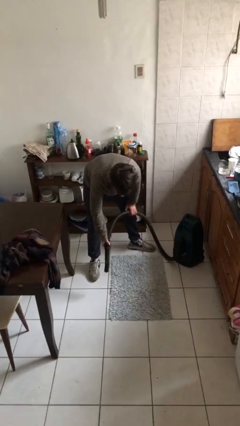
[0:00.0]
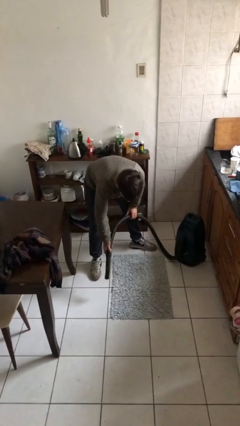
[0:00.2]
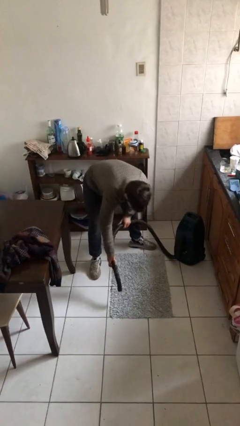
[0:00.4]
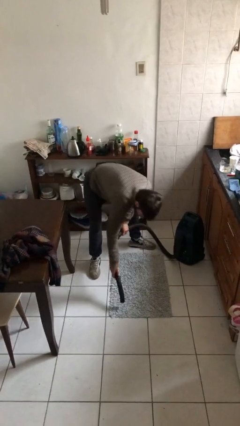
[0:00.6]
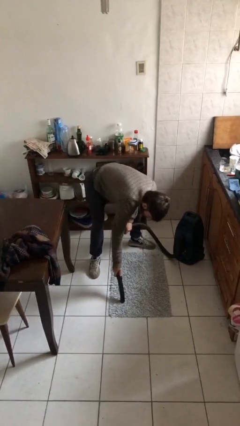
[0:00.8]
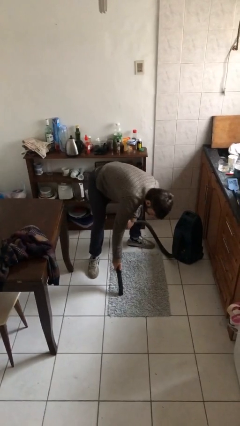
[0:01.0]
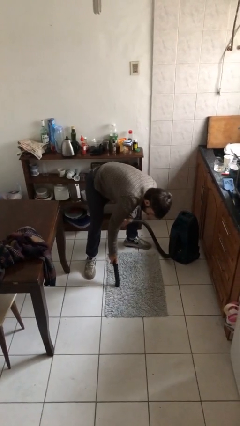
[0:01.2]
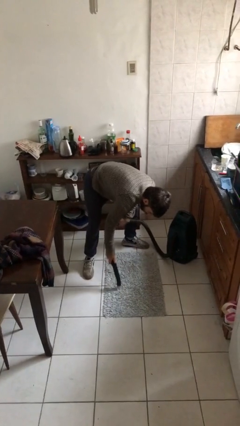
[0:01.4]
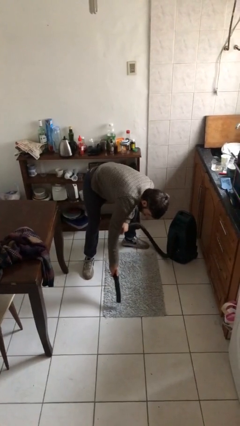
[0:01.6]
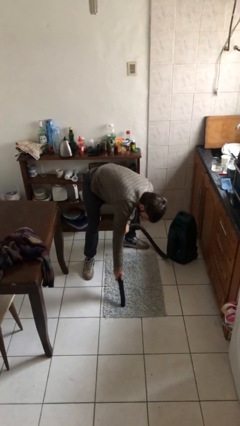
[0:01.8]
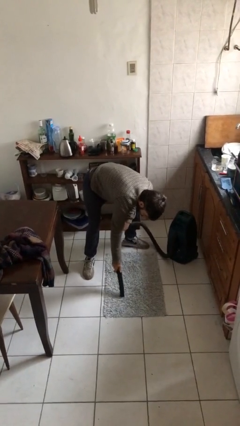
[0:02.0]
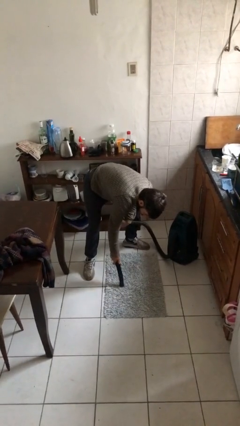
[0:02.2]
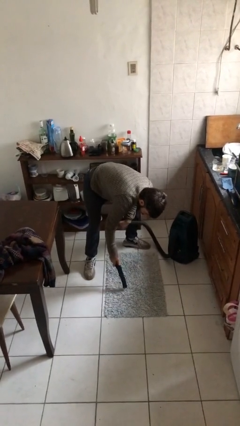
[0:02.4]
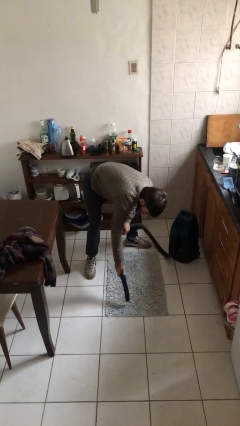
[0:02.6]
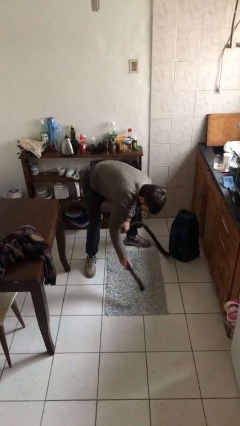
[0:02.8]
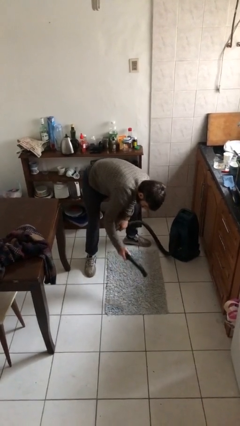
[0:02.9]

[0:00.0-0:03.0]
person vacuums carpet

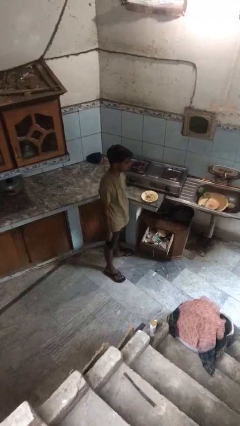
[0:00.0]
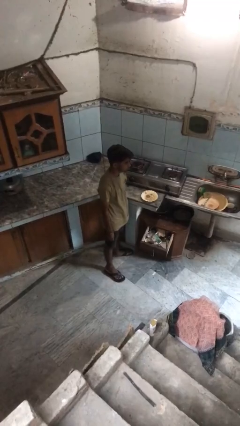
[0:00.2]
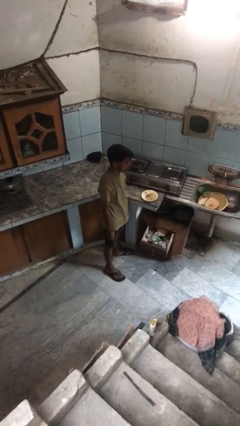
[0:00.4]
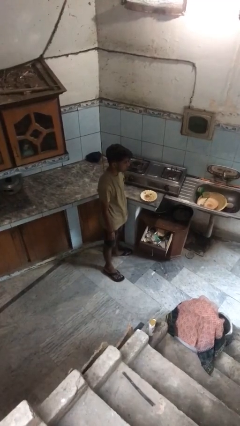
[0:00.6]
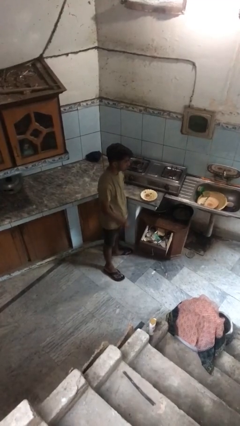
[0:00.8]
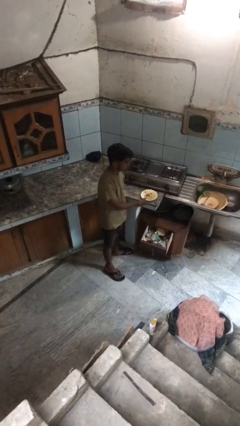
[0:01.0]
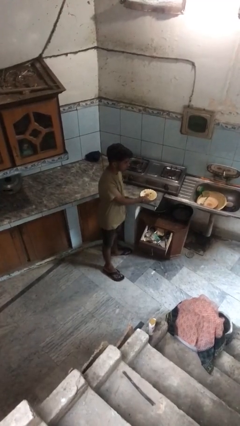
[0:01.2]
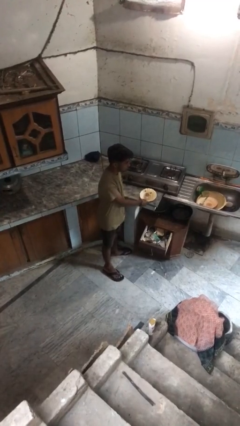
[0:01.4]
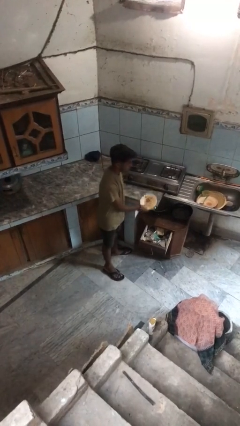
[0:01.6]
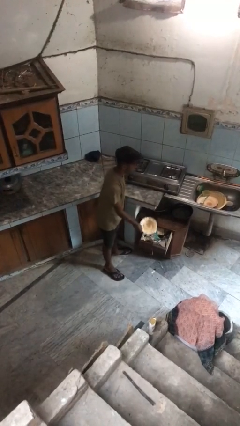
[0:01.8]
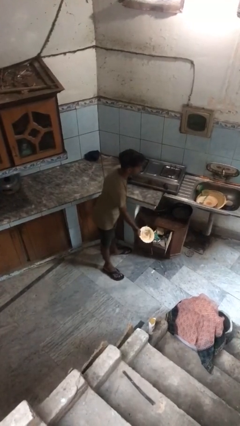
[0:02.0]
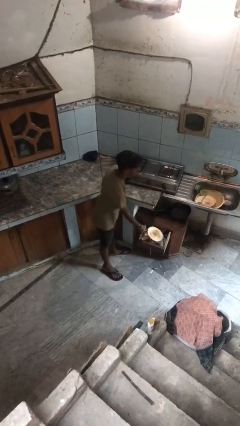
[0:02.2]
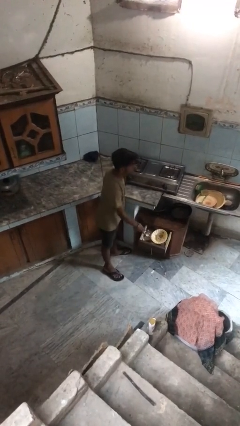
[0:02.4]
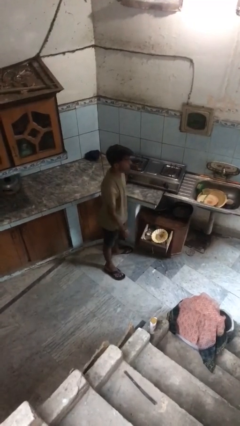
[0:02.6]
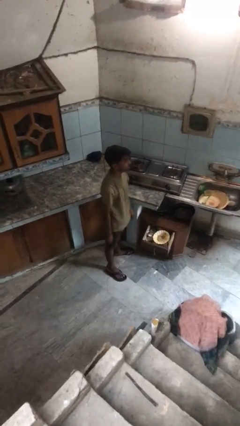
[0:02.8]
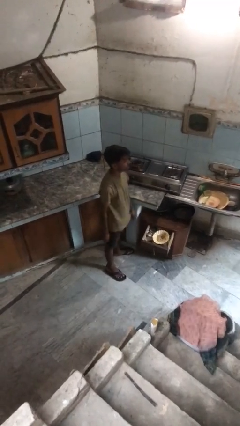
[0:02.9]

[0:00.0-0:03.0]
person puts object into kitchen drawer

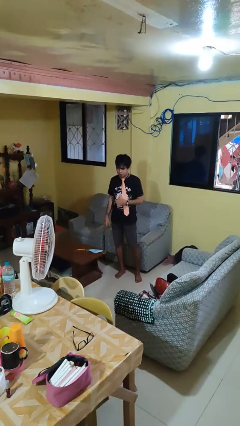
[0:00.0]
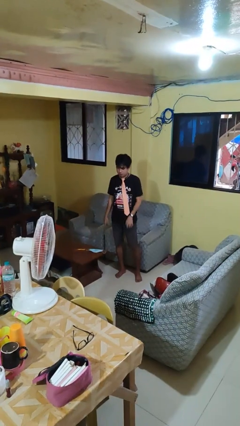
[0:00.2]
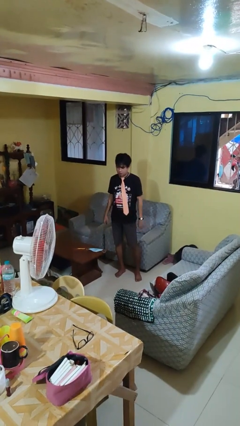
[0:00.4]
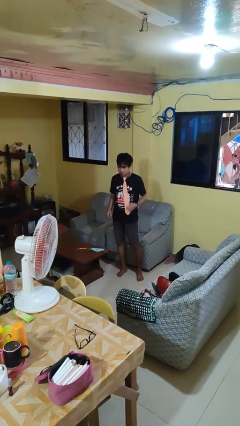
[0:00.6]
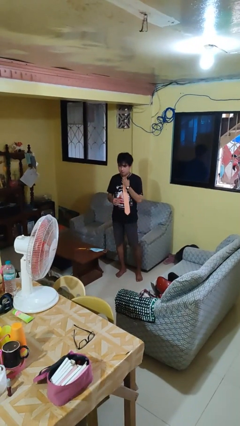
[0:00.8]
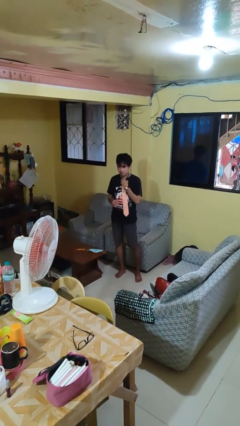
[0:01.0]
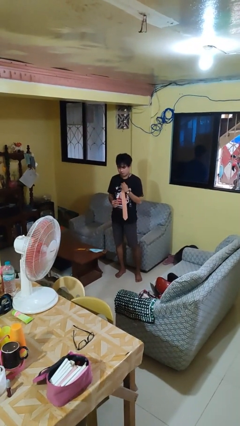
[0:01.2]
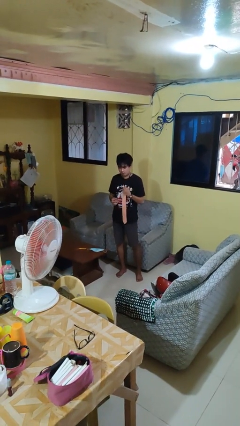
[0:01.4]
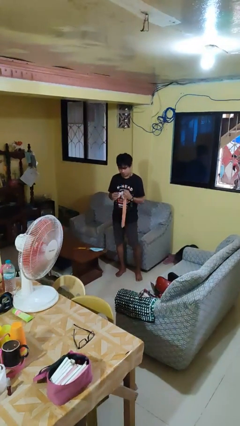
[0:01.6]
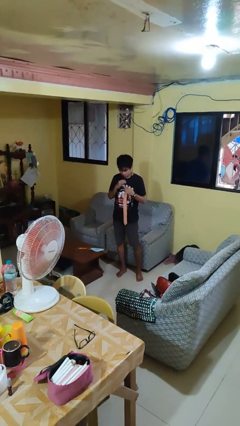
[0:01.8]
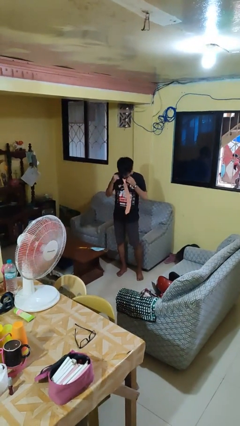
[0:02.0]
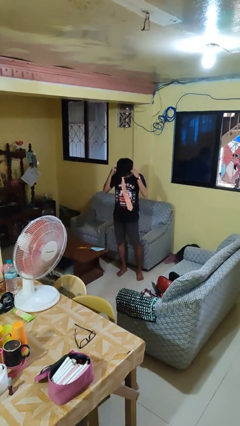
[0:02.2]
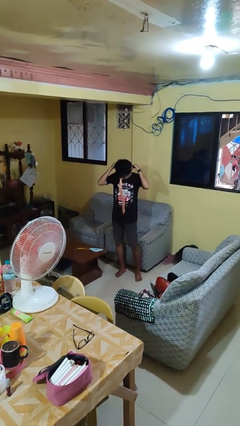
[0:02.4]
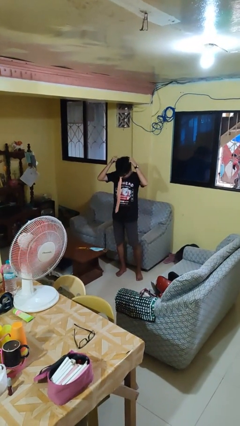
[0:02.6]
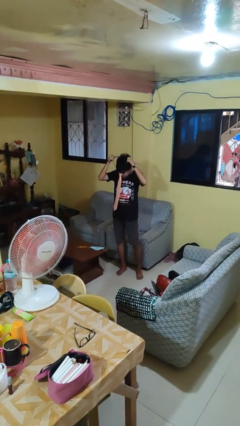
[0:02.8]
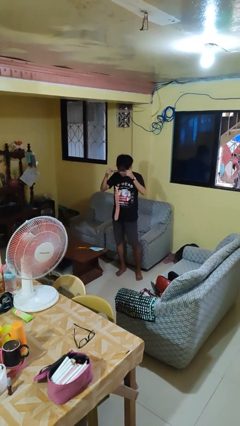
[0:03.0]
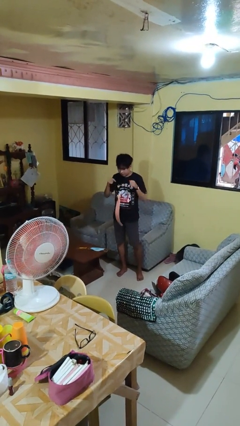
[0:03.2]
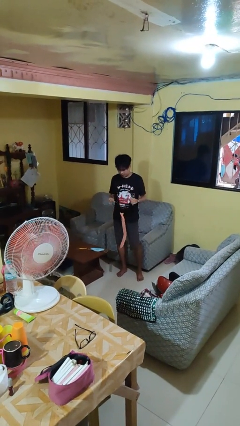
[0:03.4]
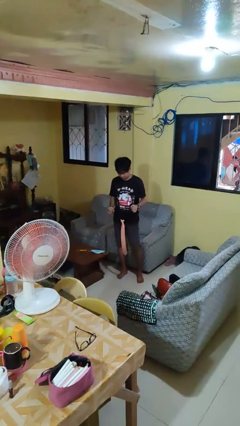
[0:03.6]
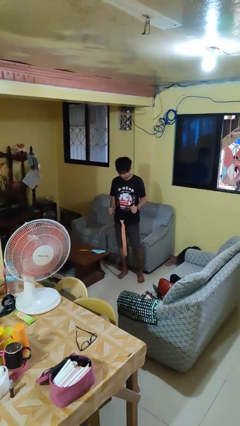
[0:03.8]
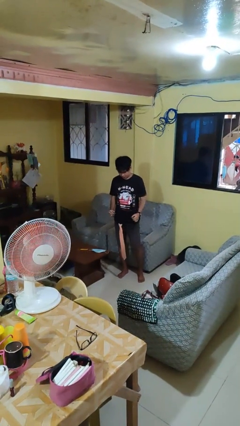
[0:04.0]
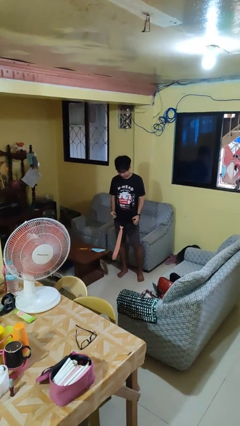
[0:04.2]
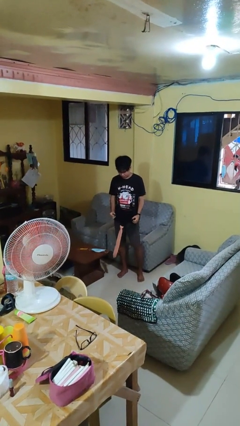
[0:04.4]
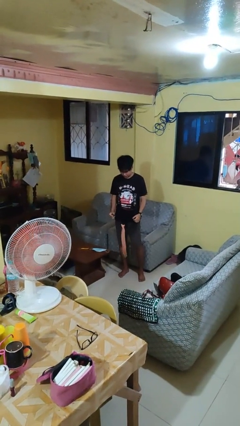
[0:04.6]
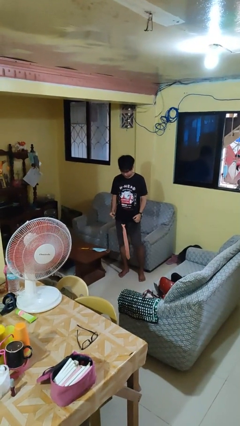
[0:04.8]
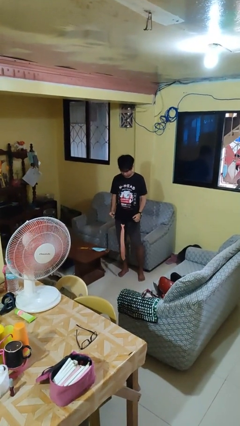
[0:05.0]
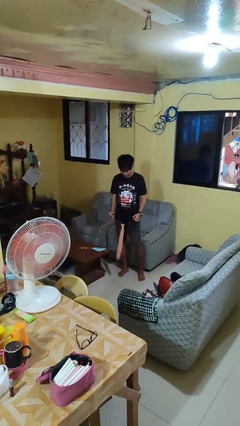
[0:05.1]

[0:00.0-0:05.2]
person takes off necktie

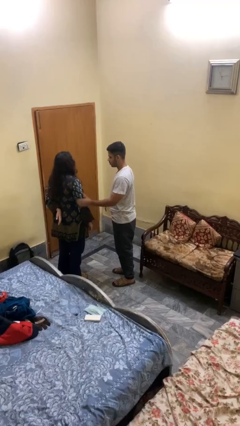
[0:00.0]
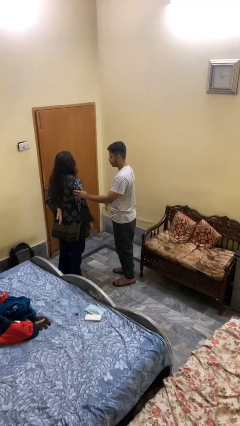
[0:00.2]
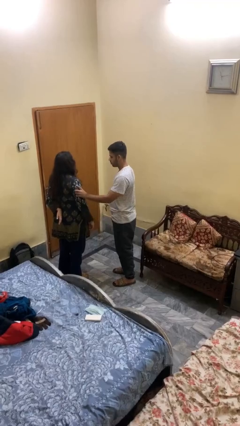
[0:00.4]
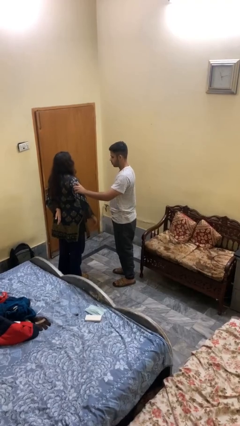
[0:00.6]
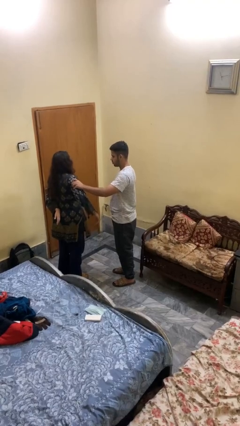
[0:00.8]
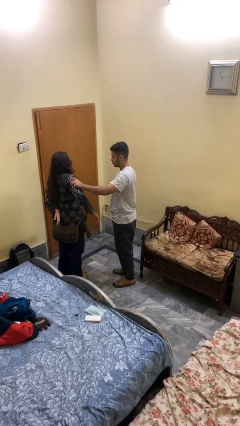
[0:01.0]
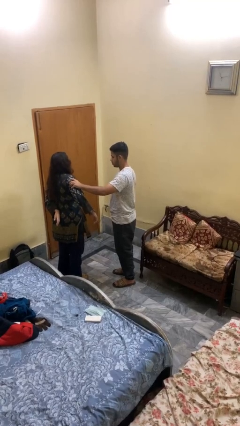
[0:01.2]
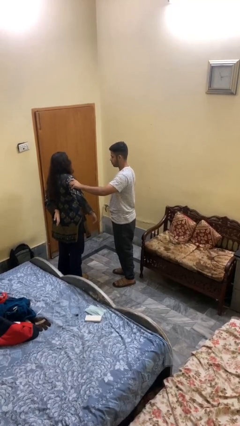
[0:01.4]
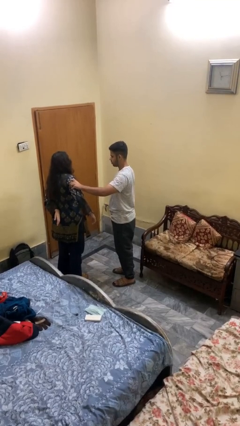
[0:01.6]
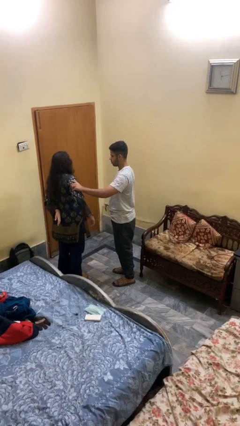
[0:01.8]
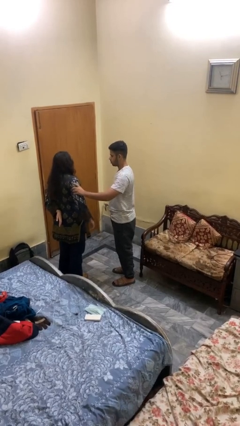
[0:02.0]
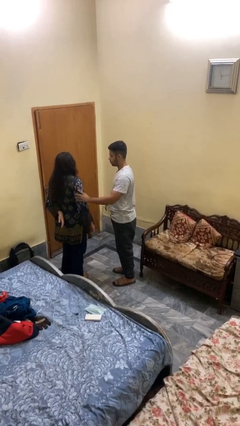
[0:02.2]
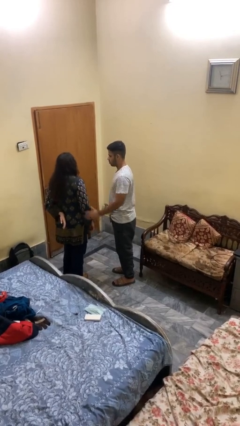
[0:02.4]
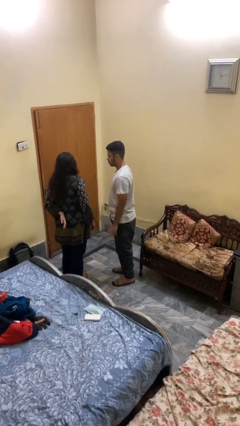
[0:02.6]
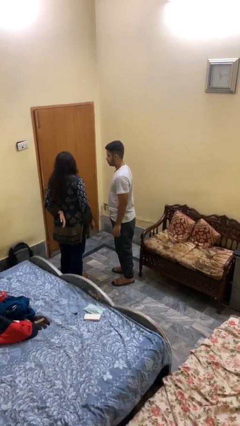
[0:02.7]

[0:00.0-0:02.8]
person grabs person by bicep

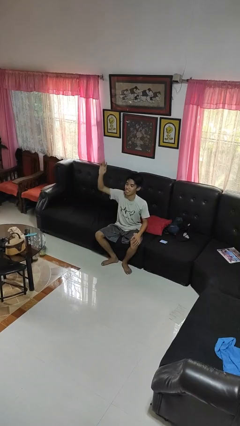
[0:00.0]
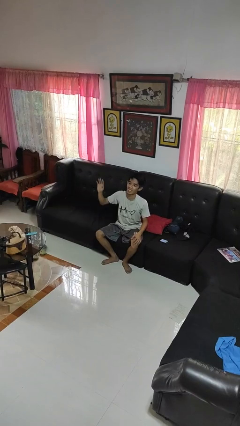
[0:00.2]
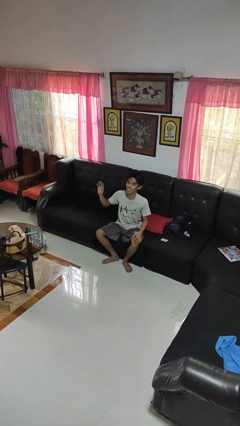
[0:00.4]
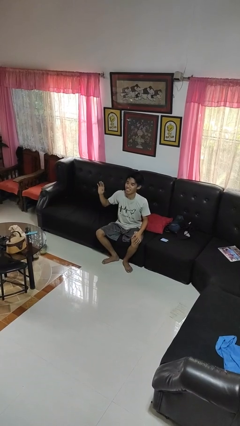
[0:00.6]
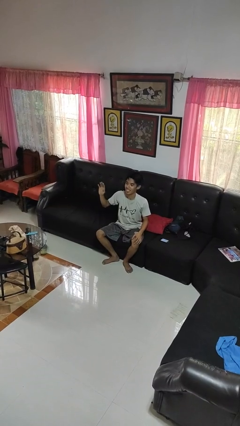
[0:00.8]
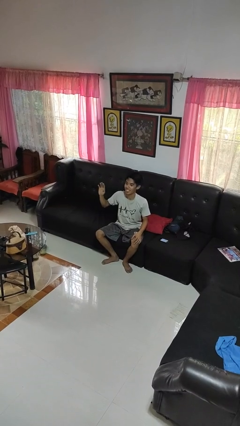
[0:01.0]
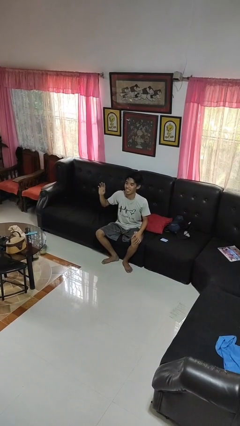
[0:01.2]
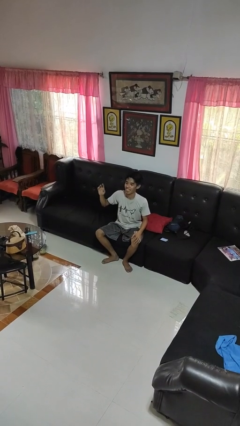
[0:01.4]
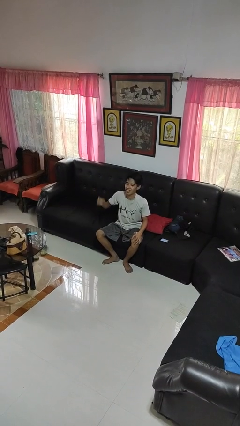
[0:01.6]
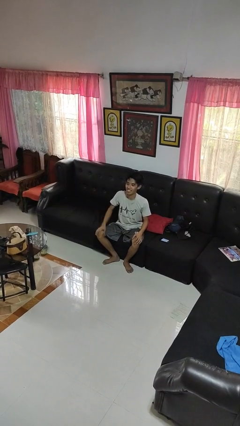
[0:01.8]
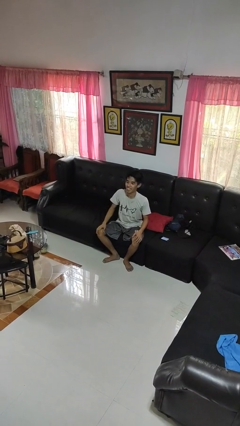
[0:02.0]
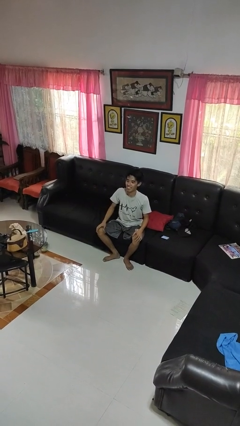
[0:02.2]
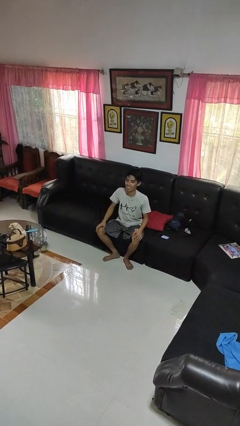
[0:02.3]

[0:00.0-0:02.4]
person gestures lower hand

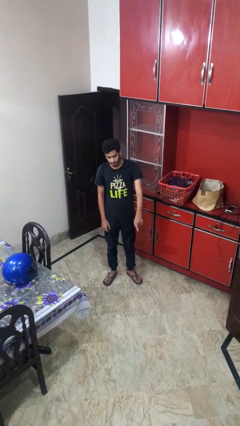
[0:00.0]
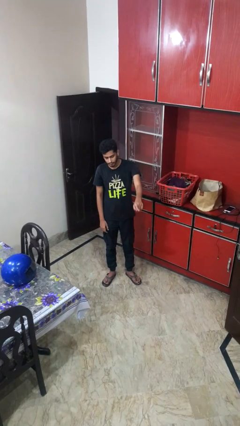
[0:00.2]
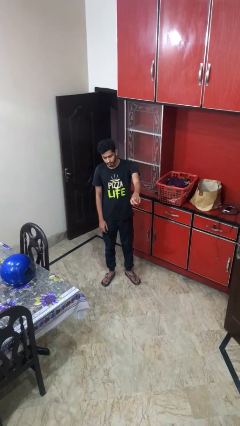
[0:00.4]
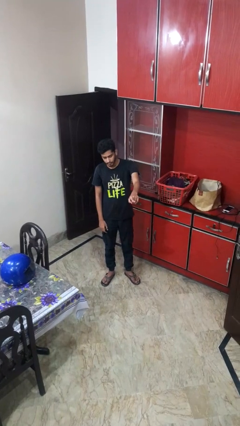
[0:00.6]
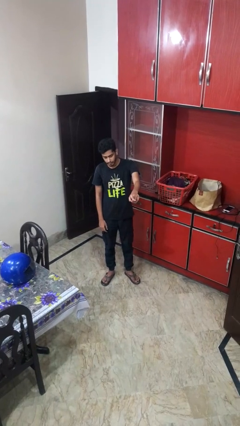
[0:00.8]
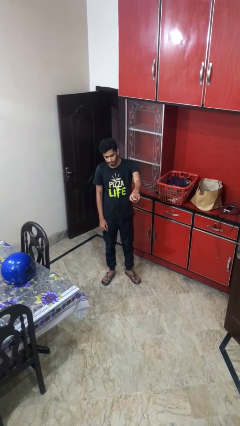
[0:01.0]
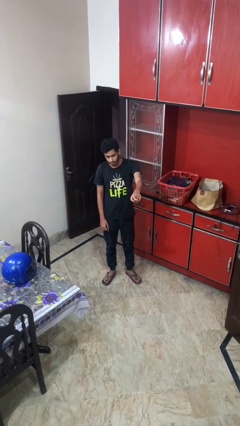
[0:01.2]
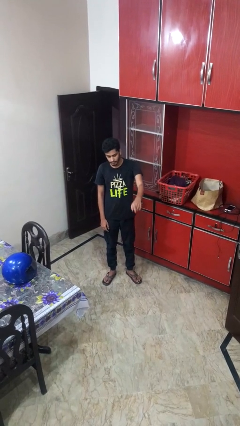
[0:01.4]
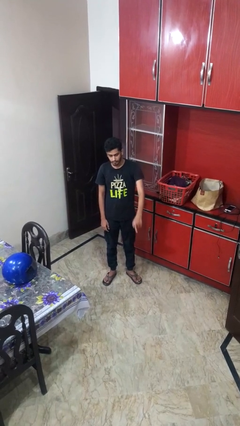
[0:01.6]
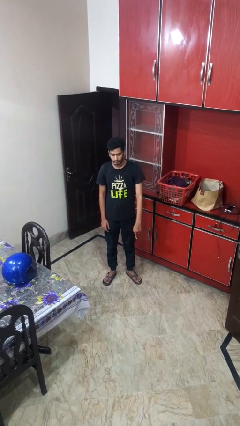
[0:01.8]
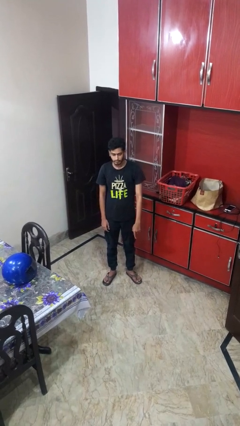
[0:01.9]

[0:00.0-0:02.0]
person points at person
